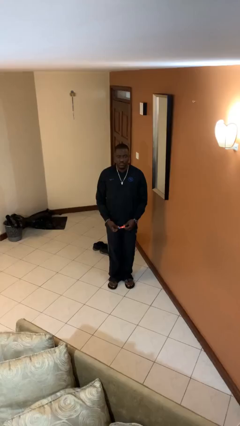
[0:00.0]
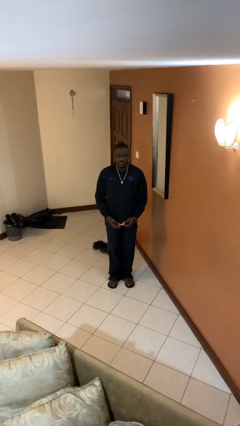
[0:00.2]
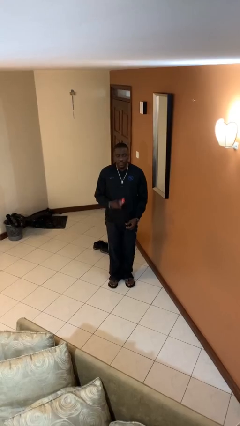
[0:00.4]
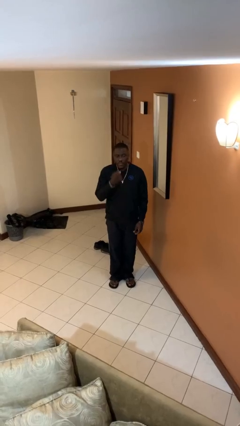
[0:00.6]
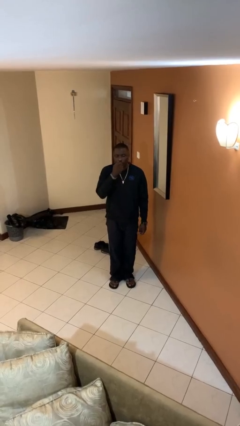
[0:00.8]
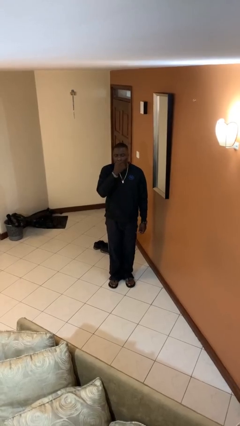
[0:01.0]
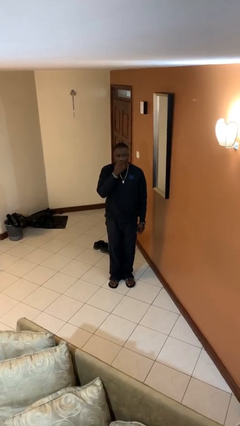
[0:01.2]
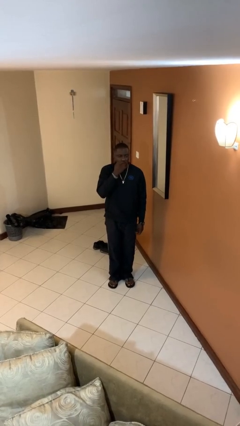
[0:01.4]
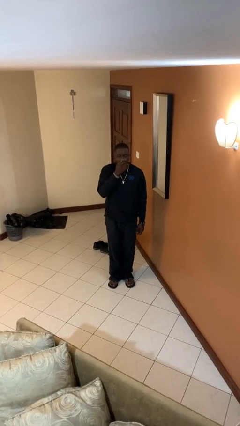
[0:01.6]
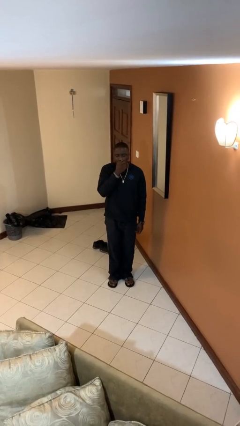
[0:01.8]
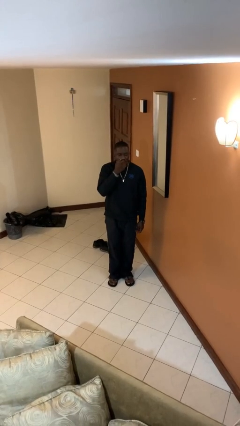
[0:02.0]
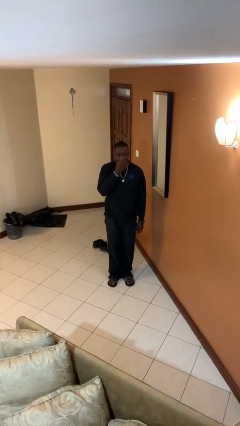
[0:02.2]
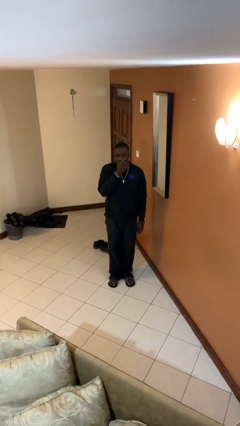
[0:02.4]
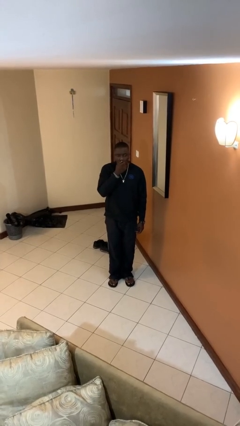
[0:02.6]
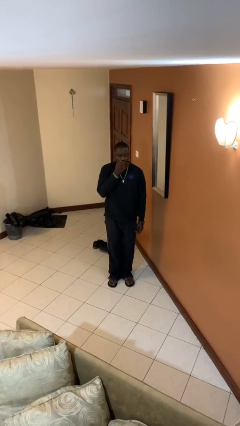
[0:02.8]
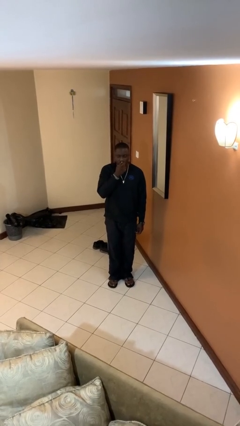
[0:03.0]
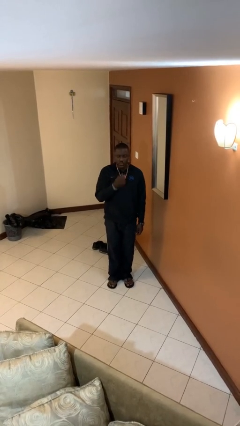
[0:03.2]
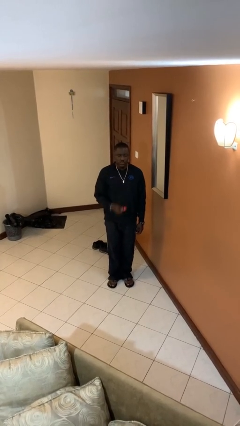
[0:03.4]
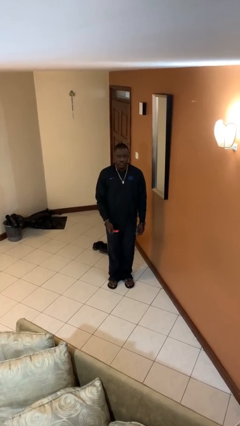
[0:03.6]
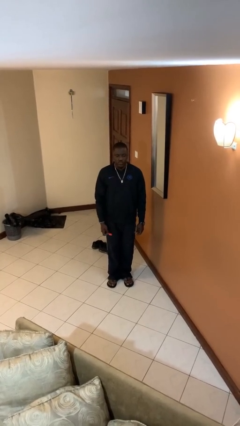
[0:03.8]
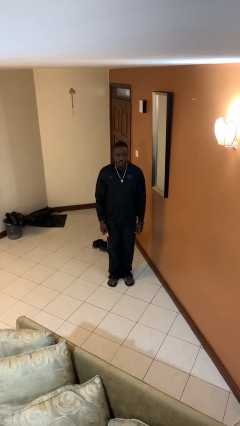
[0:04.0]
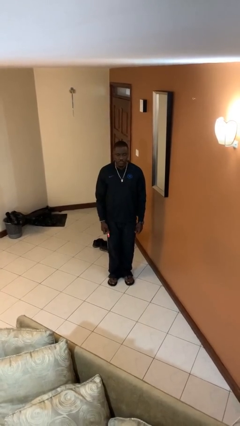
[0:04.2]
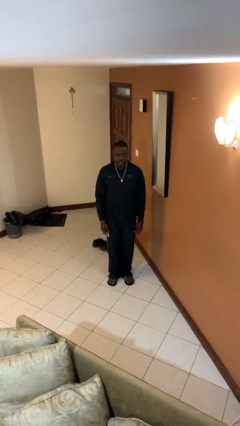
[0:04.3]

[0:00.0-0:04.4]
person applies lip makeup

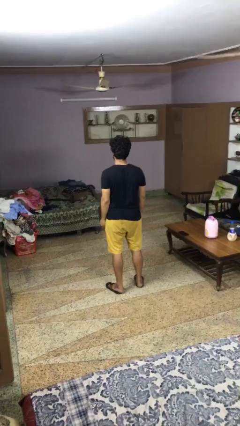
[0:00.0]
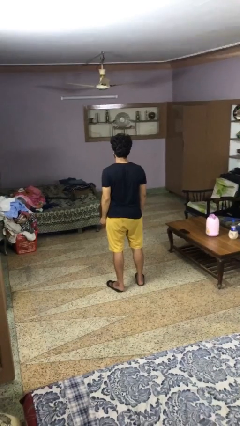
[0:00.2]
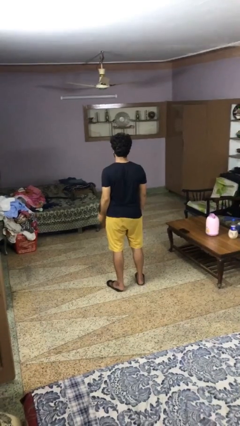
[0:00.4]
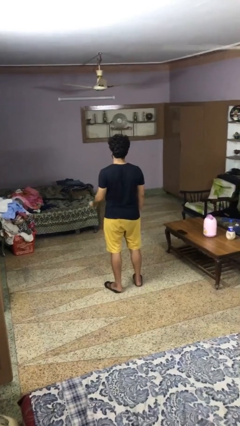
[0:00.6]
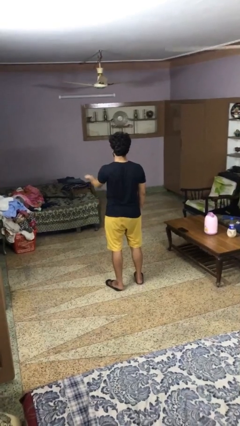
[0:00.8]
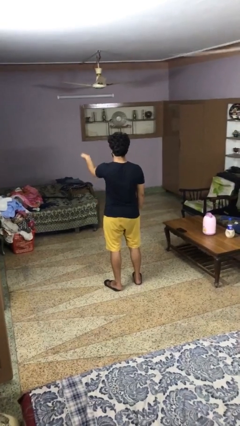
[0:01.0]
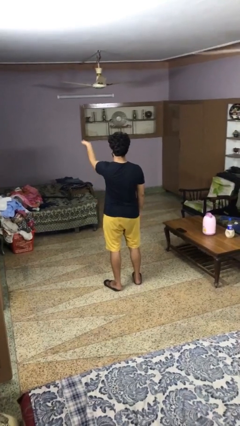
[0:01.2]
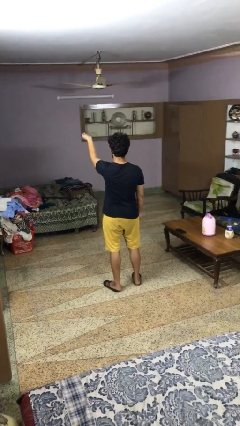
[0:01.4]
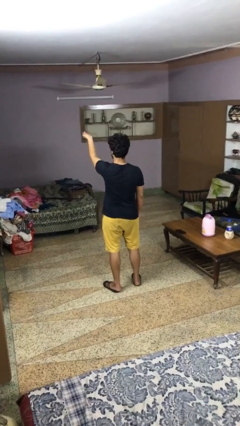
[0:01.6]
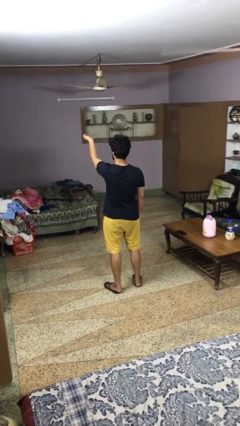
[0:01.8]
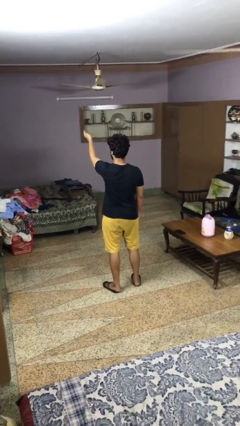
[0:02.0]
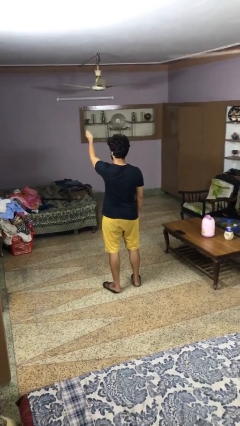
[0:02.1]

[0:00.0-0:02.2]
person gestures swipe up

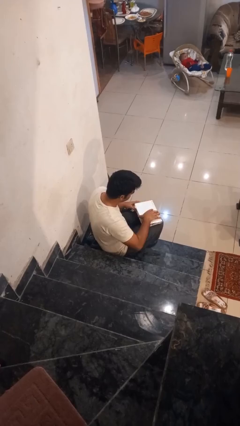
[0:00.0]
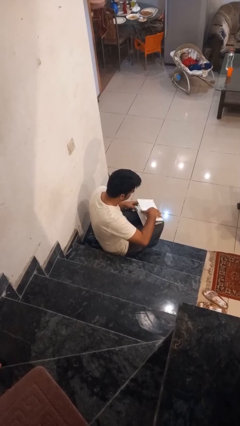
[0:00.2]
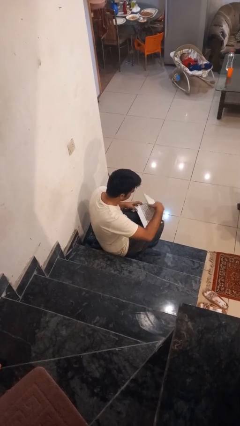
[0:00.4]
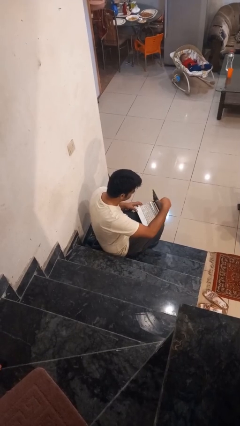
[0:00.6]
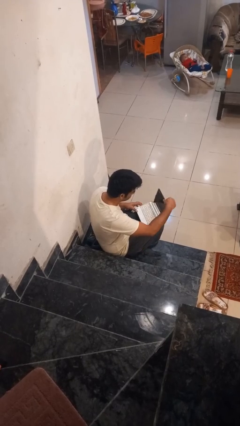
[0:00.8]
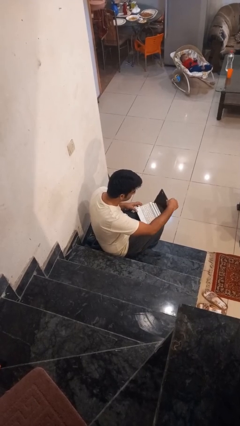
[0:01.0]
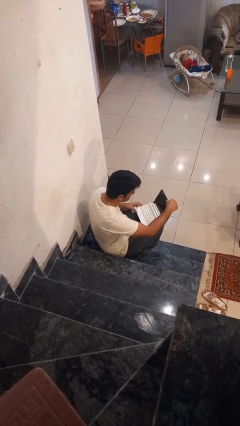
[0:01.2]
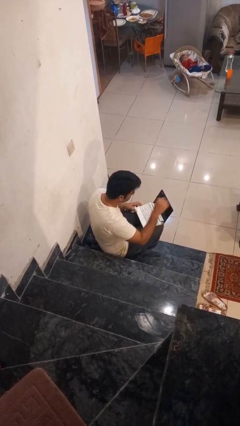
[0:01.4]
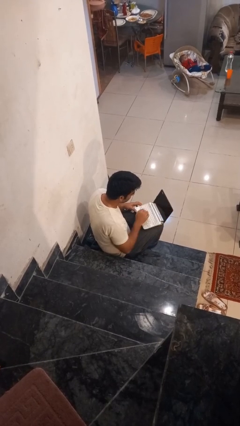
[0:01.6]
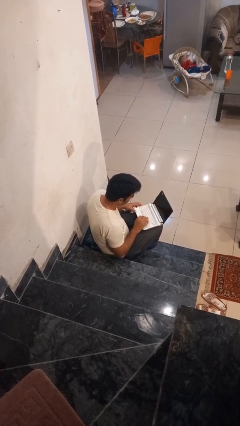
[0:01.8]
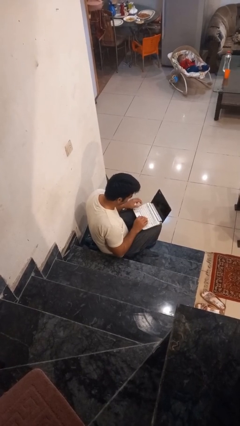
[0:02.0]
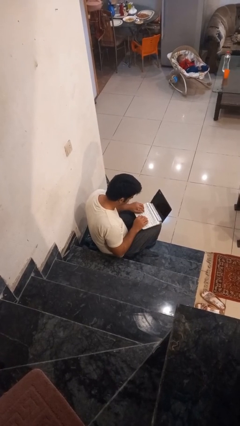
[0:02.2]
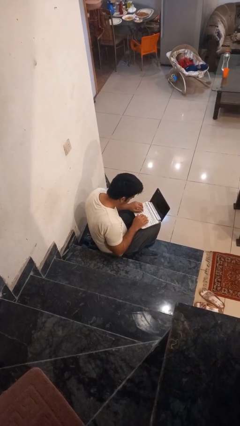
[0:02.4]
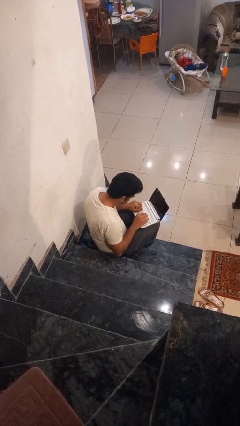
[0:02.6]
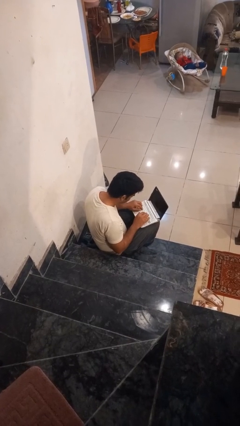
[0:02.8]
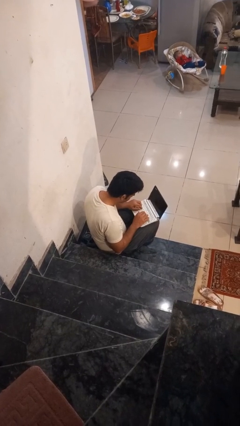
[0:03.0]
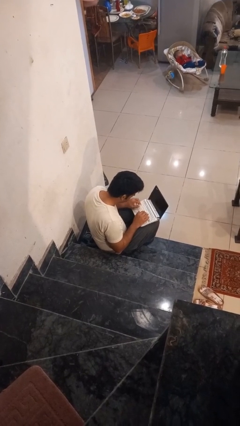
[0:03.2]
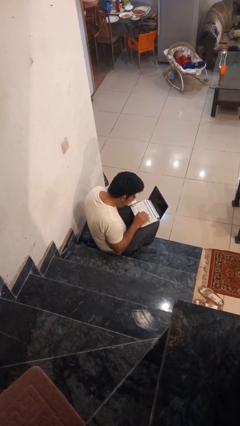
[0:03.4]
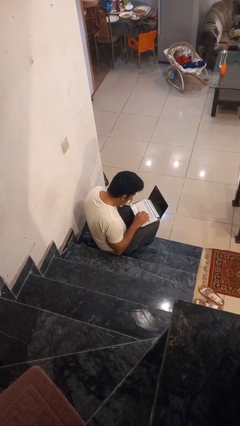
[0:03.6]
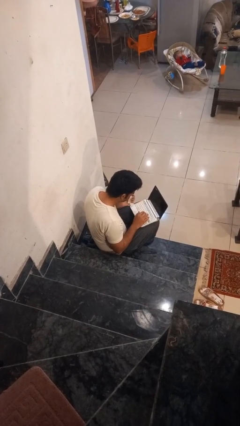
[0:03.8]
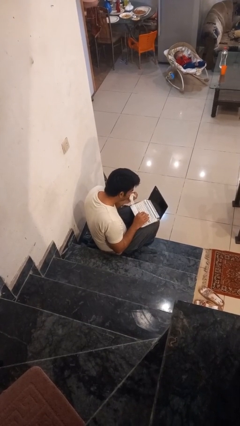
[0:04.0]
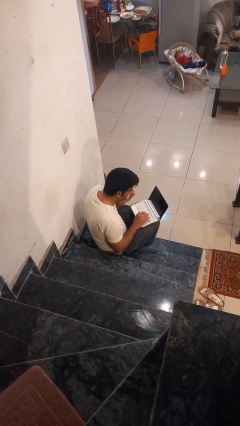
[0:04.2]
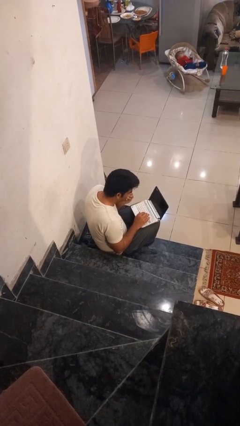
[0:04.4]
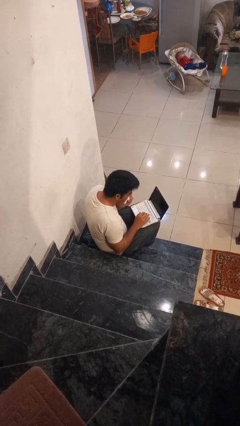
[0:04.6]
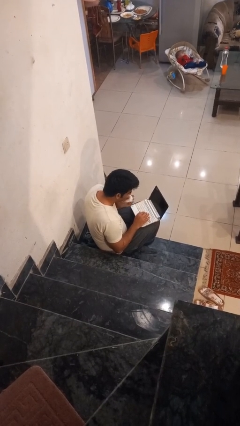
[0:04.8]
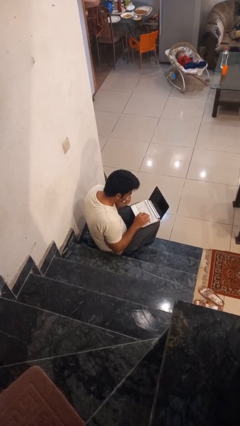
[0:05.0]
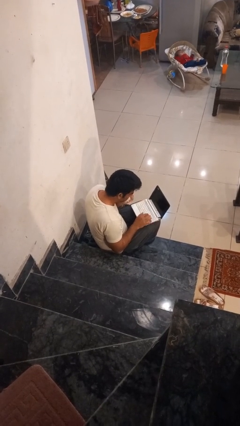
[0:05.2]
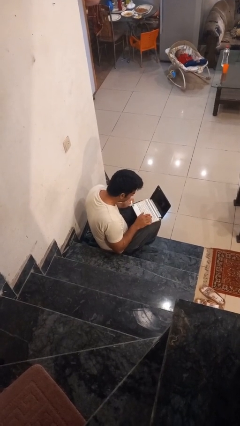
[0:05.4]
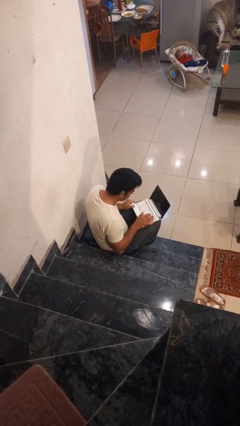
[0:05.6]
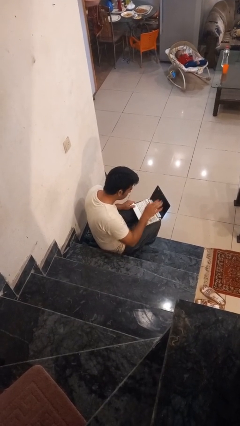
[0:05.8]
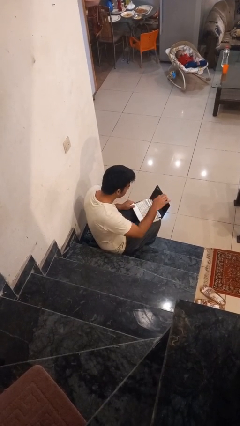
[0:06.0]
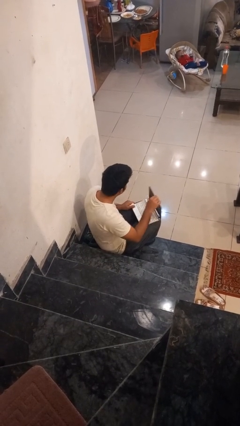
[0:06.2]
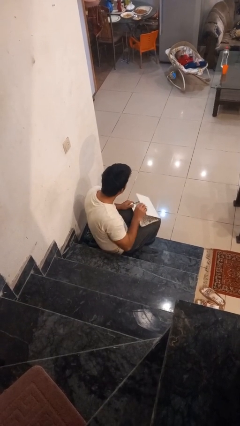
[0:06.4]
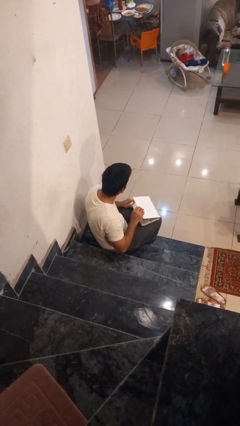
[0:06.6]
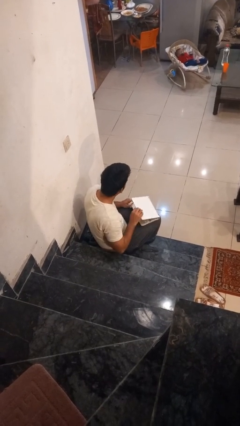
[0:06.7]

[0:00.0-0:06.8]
person interacts with laptop

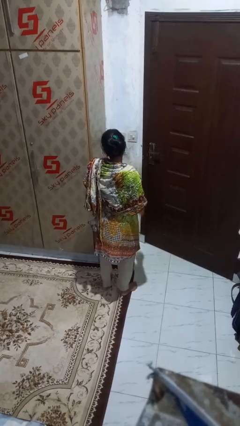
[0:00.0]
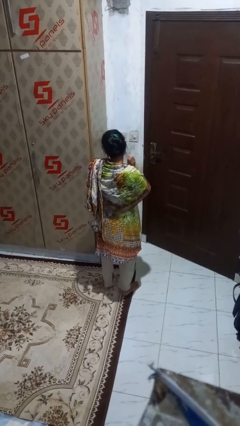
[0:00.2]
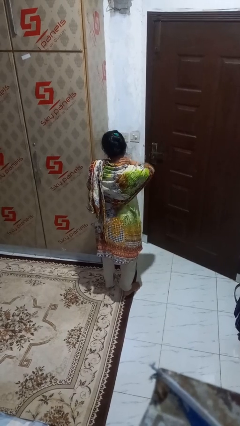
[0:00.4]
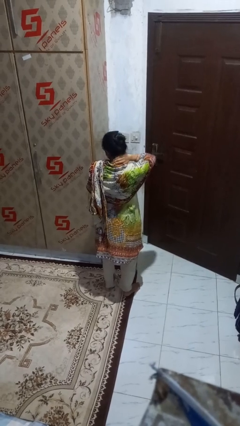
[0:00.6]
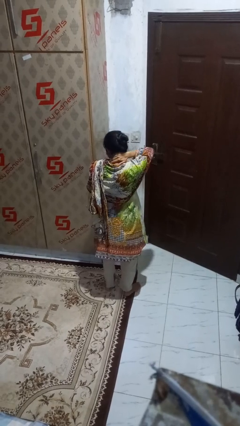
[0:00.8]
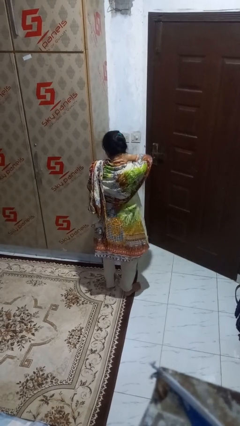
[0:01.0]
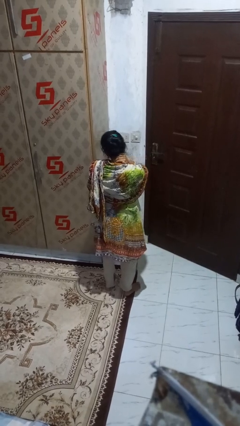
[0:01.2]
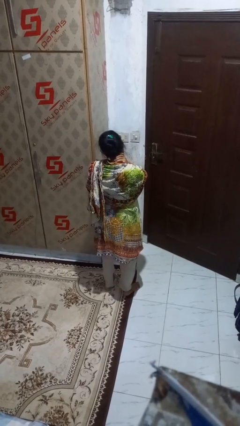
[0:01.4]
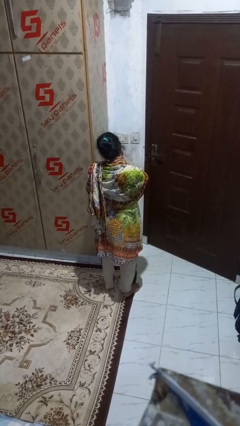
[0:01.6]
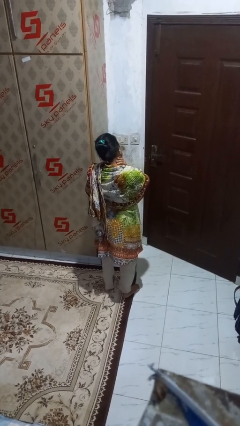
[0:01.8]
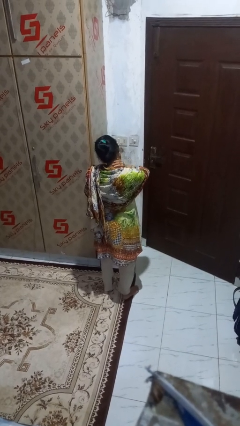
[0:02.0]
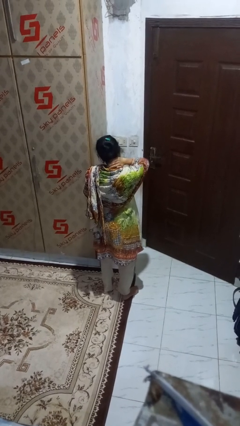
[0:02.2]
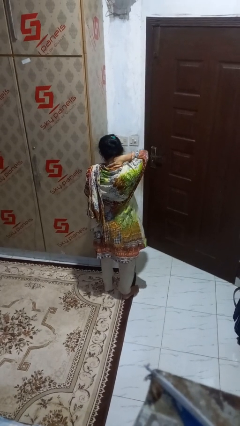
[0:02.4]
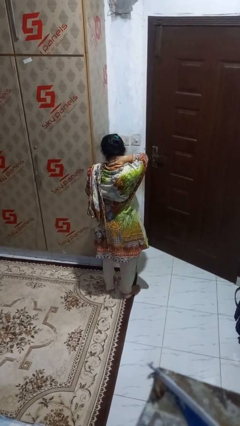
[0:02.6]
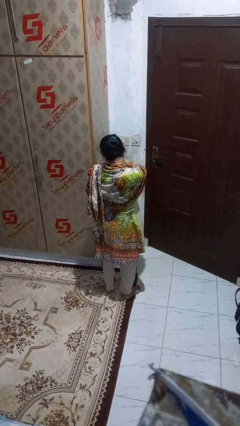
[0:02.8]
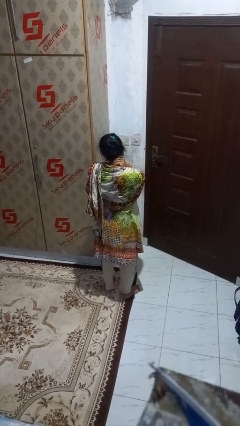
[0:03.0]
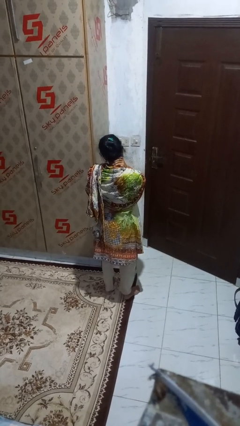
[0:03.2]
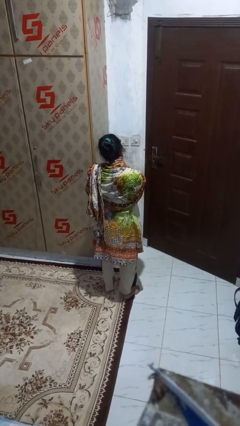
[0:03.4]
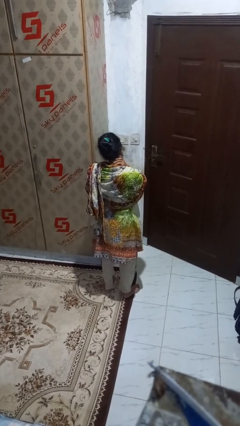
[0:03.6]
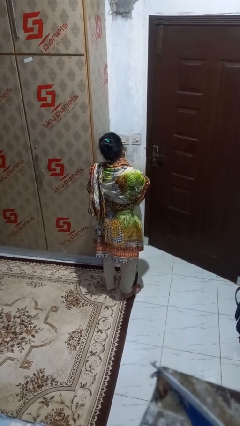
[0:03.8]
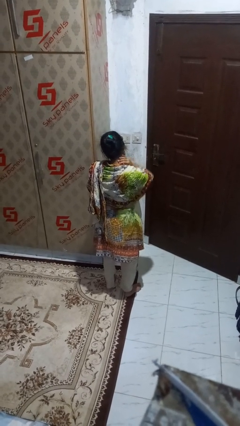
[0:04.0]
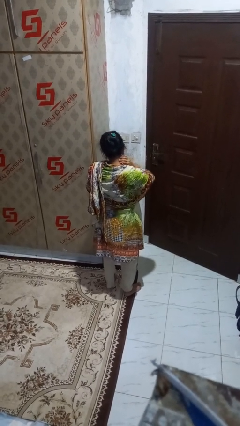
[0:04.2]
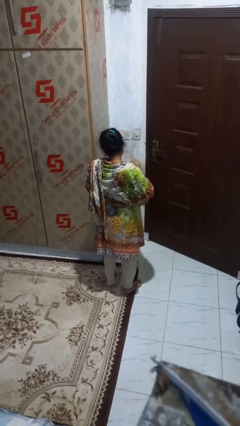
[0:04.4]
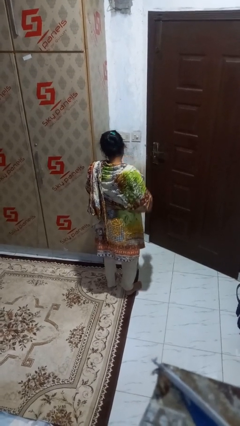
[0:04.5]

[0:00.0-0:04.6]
person rubs neck
